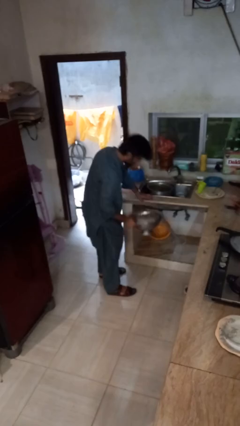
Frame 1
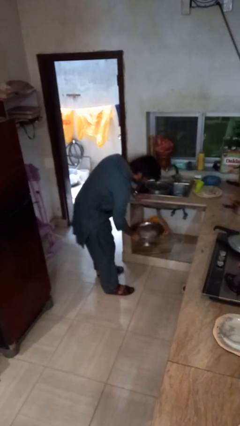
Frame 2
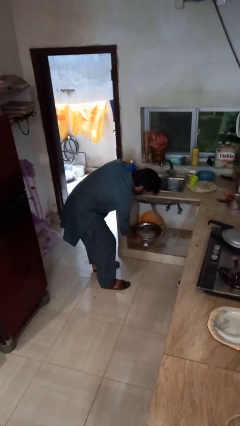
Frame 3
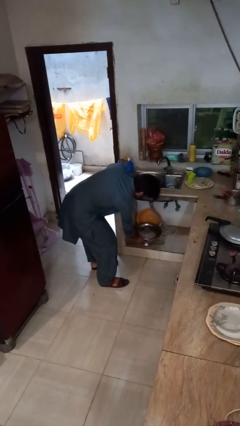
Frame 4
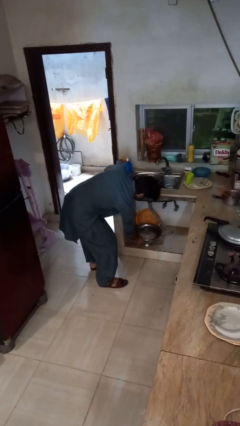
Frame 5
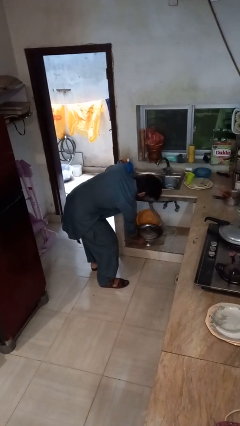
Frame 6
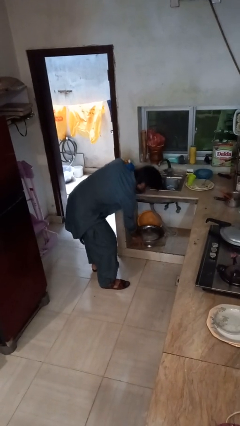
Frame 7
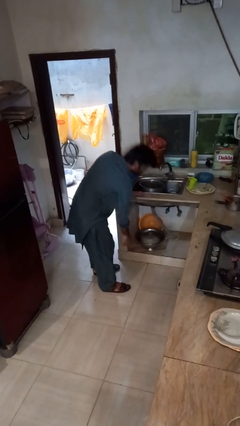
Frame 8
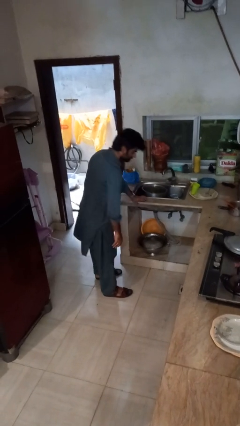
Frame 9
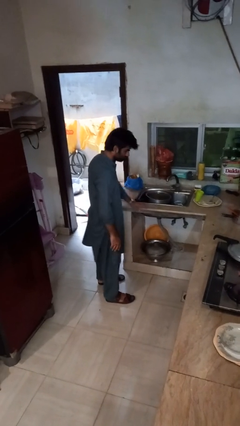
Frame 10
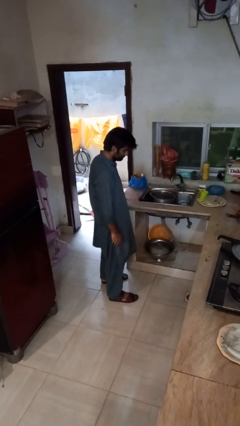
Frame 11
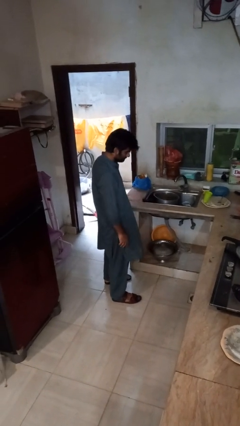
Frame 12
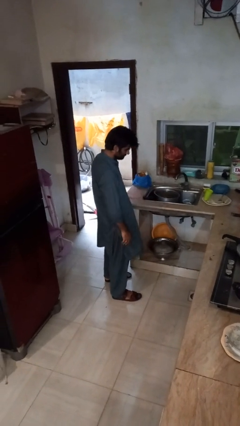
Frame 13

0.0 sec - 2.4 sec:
person puts down object into cabinet

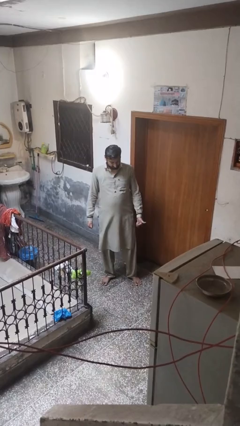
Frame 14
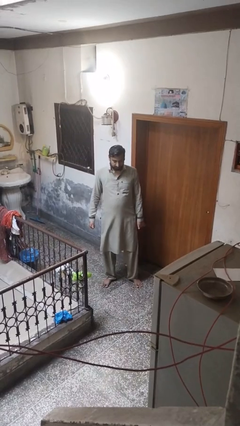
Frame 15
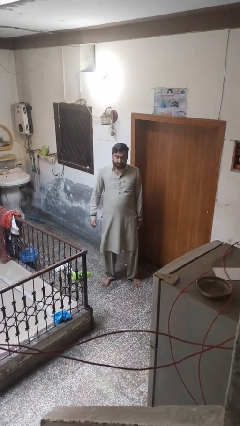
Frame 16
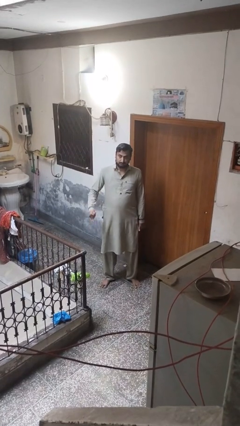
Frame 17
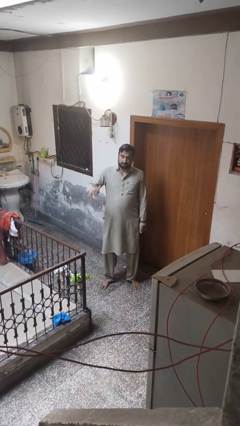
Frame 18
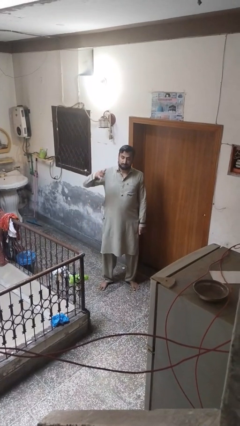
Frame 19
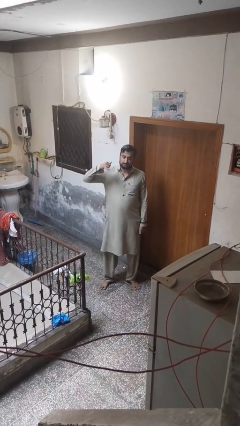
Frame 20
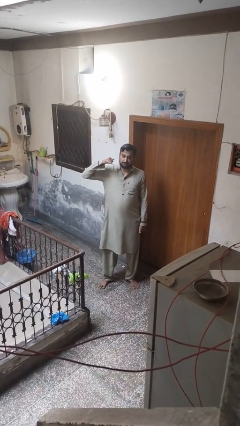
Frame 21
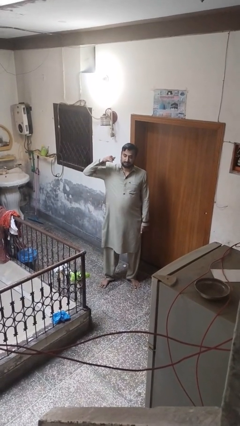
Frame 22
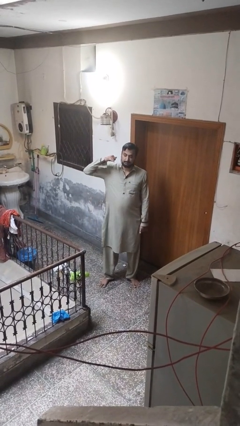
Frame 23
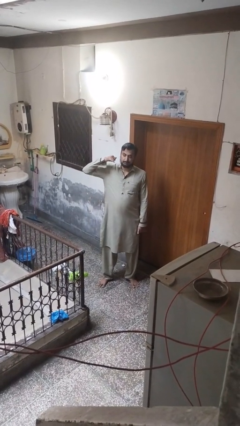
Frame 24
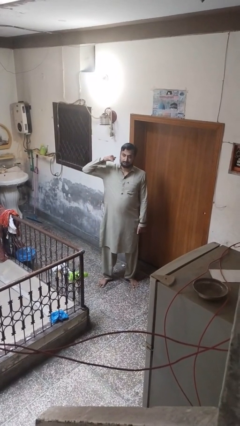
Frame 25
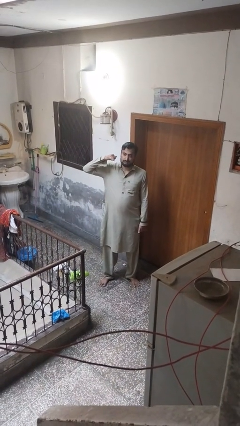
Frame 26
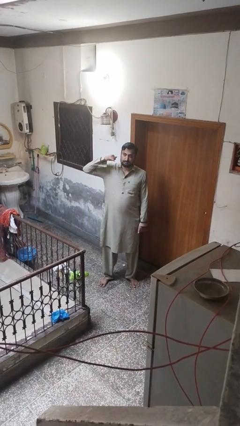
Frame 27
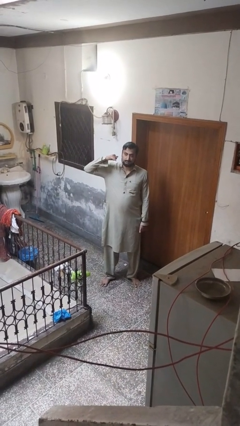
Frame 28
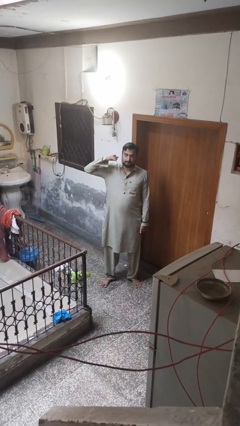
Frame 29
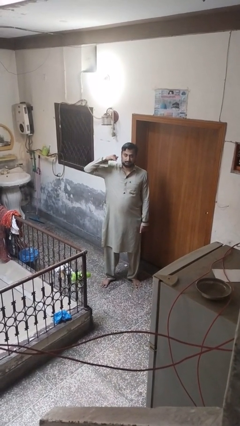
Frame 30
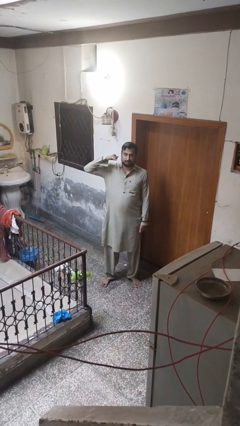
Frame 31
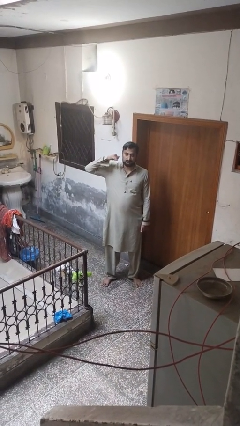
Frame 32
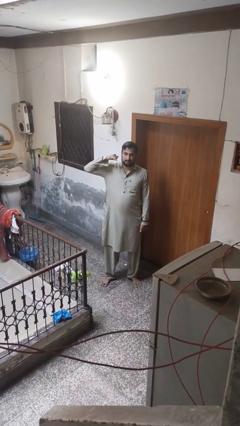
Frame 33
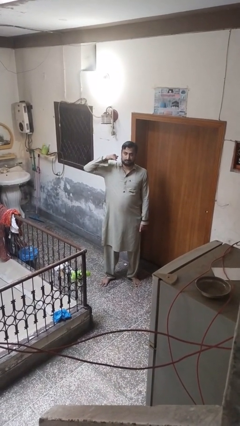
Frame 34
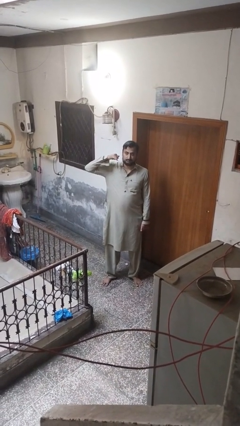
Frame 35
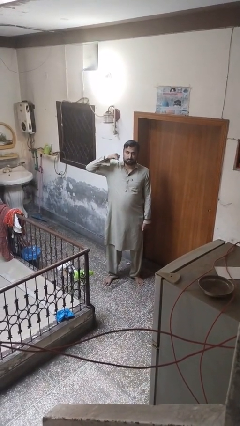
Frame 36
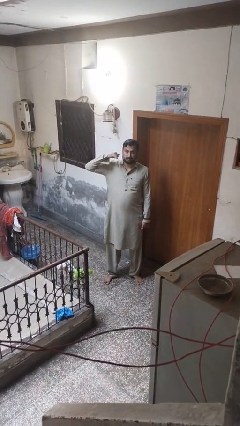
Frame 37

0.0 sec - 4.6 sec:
person gestures call me

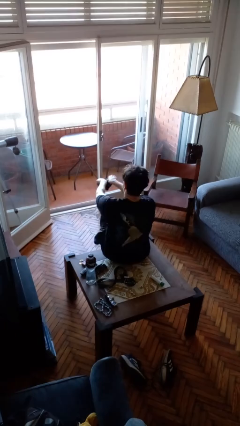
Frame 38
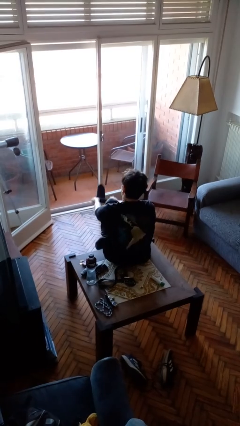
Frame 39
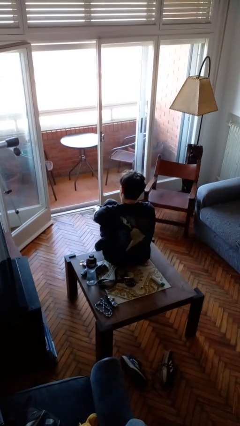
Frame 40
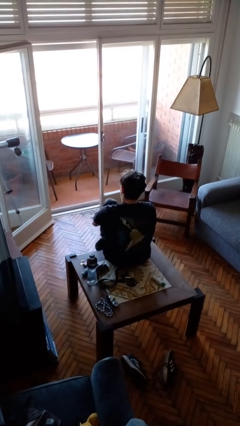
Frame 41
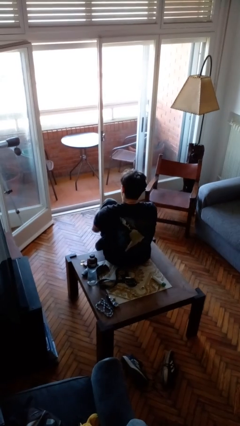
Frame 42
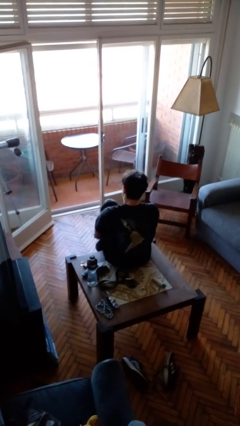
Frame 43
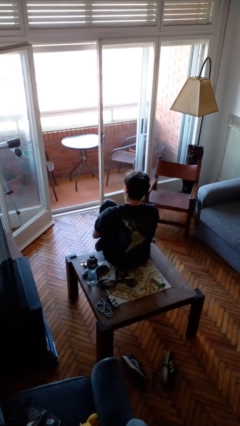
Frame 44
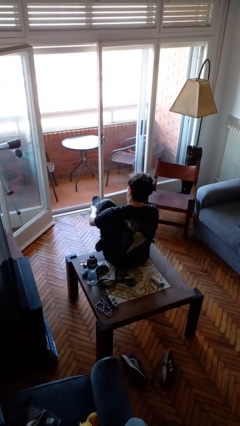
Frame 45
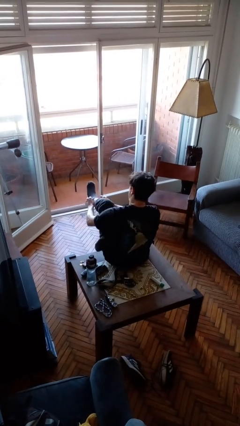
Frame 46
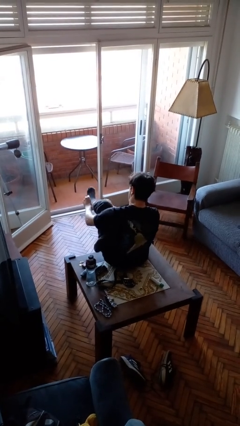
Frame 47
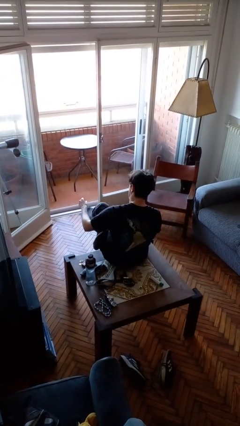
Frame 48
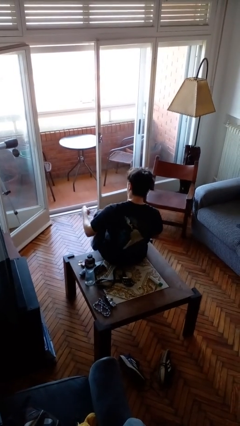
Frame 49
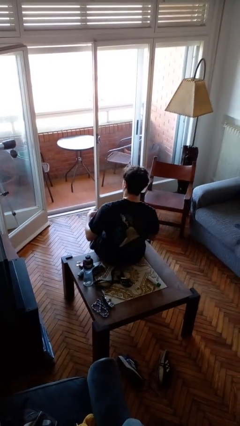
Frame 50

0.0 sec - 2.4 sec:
person puts on socks

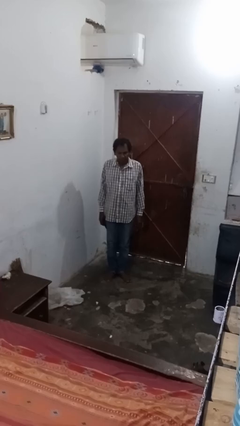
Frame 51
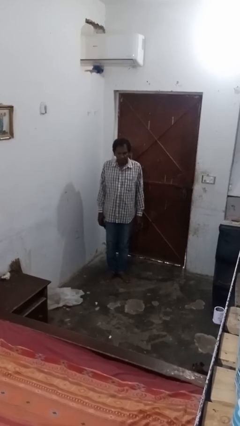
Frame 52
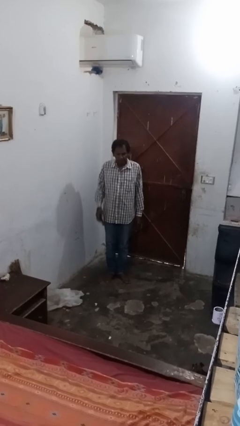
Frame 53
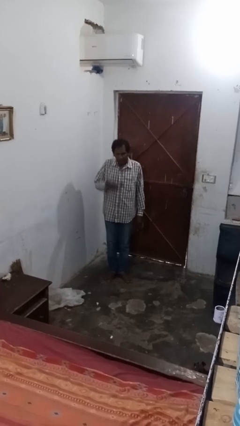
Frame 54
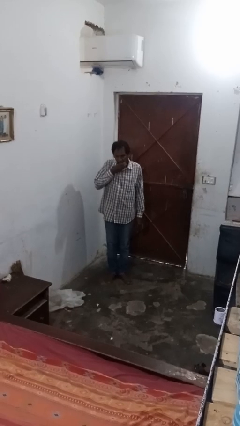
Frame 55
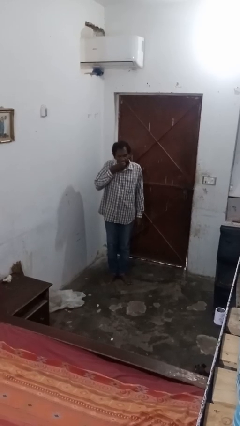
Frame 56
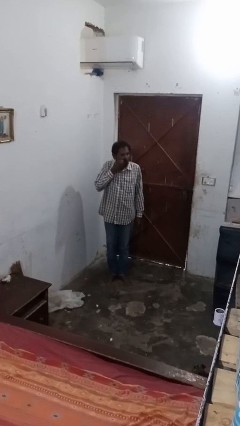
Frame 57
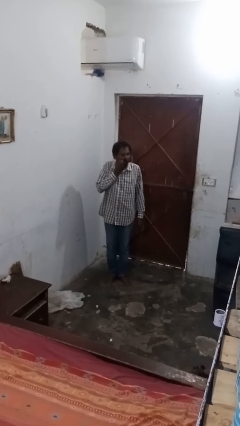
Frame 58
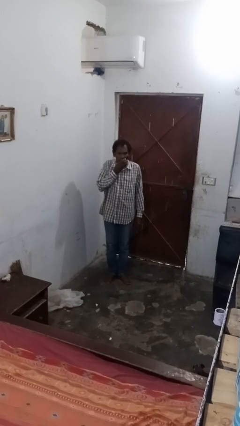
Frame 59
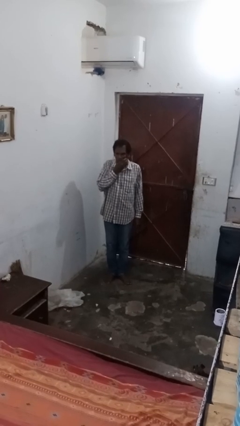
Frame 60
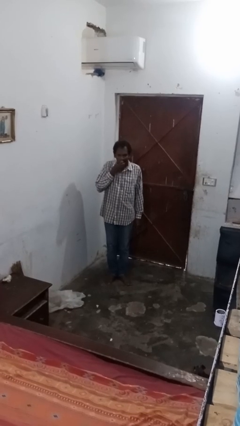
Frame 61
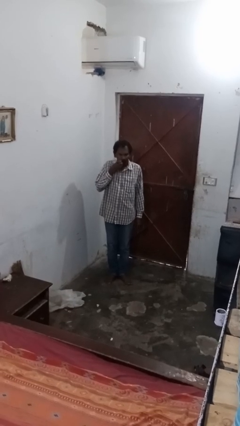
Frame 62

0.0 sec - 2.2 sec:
person wipes mouth with napkin

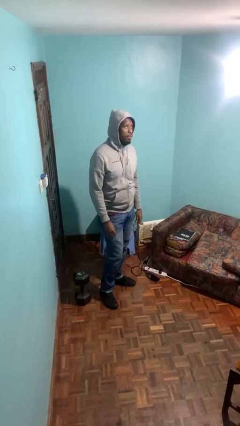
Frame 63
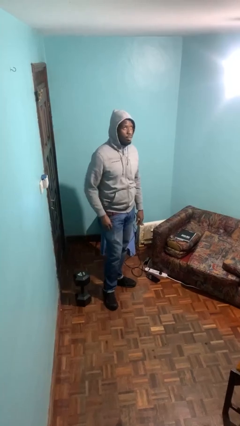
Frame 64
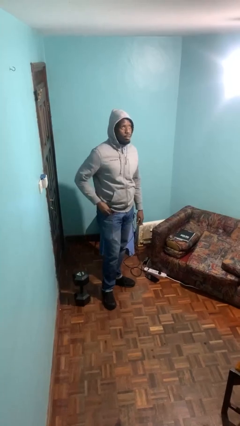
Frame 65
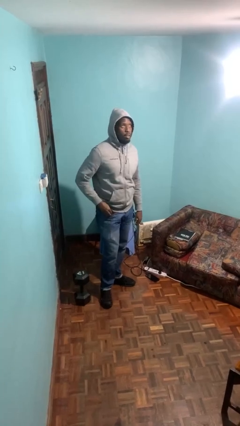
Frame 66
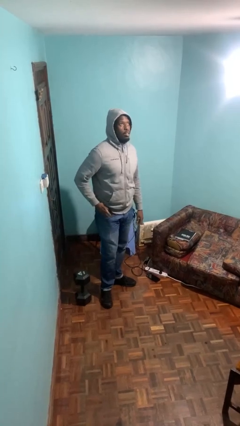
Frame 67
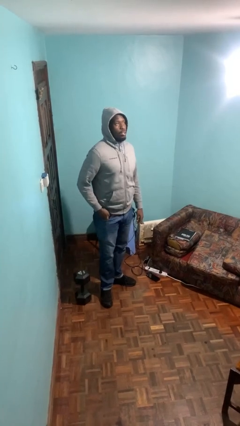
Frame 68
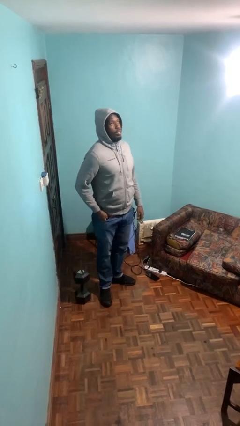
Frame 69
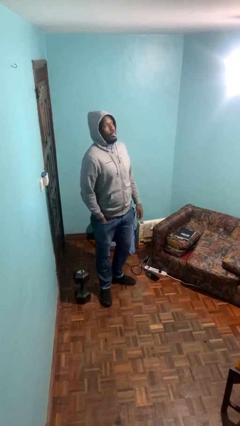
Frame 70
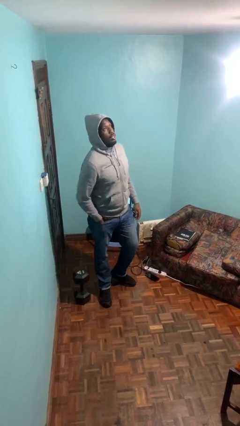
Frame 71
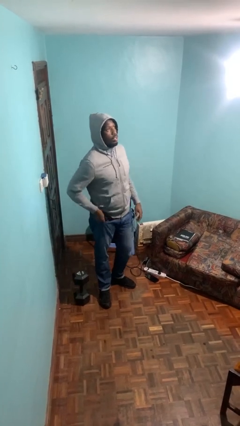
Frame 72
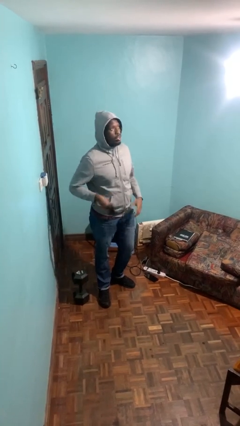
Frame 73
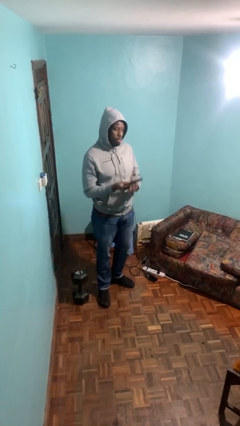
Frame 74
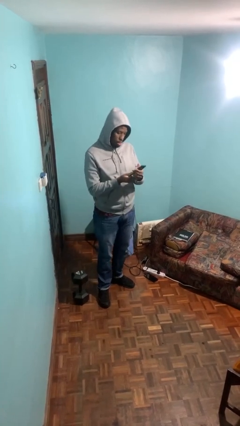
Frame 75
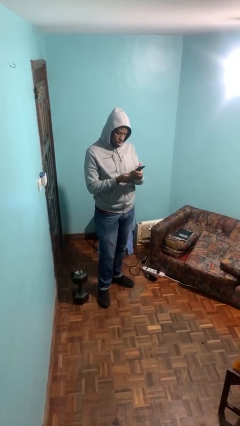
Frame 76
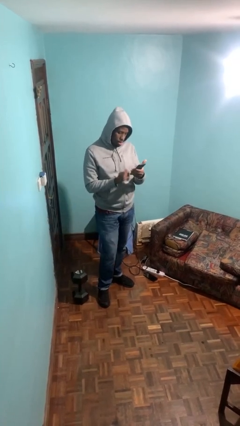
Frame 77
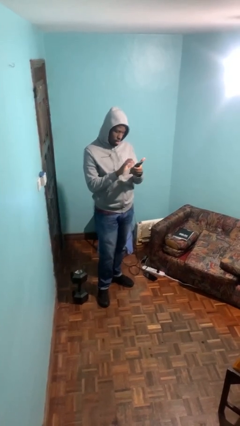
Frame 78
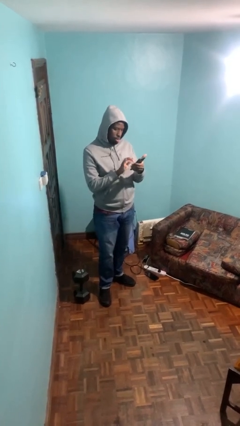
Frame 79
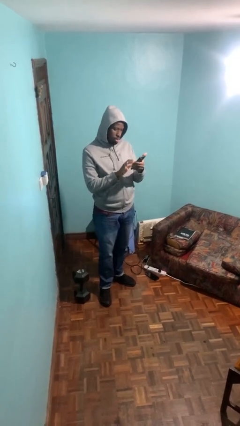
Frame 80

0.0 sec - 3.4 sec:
person takes phone from pocket

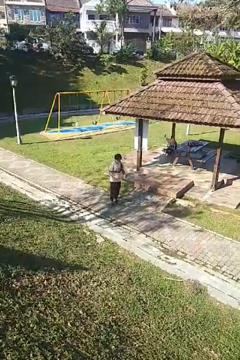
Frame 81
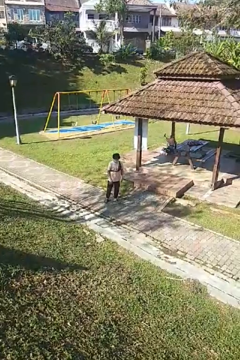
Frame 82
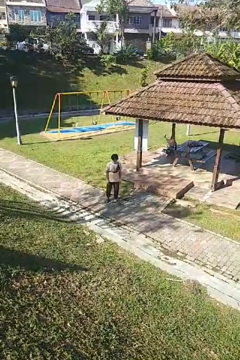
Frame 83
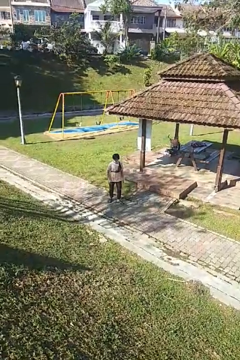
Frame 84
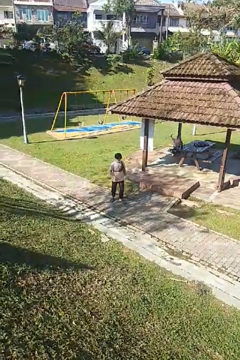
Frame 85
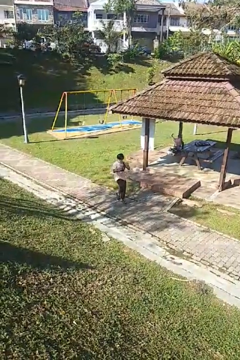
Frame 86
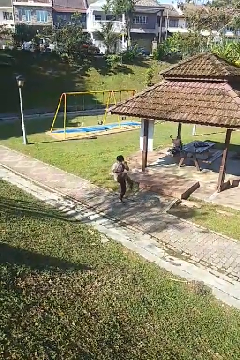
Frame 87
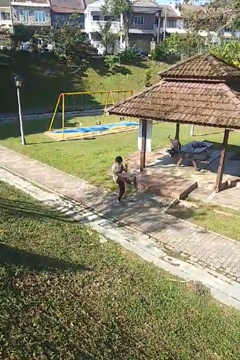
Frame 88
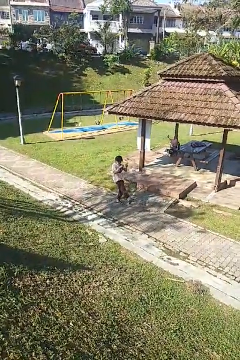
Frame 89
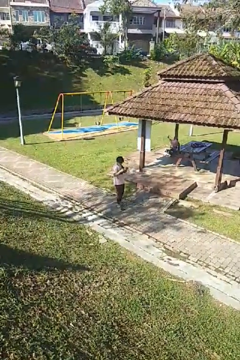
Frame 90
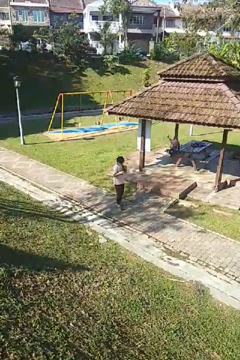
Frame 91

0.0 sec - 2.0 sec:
person karate kicks

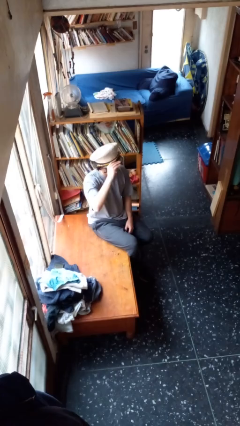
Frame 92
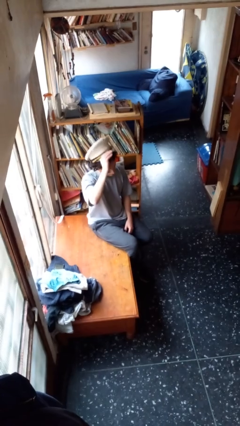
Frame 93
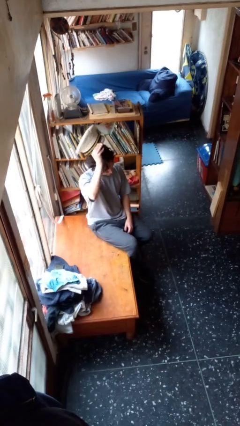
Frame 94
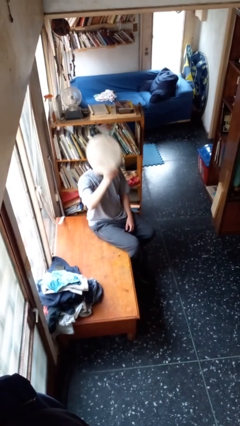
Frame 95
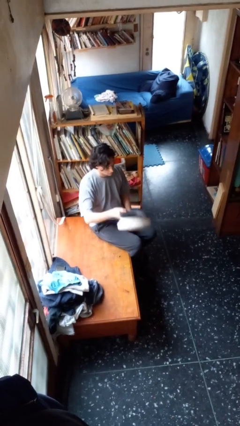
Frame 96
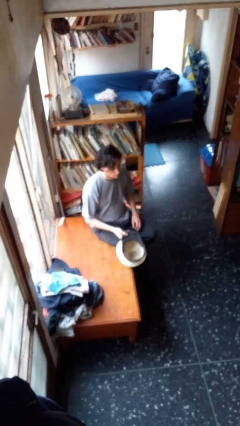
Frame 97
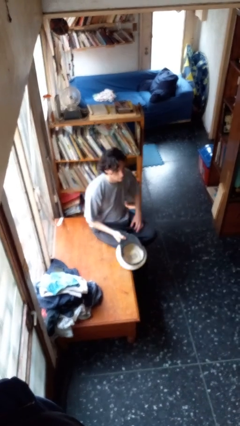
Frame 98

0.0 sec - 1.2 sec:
person takes off hat
